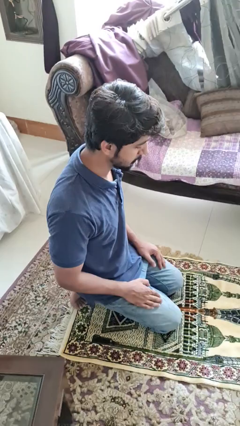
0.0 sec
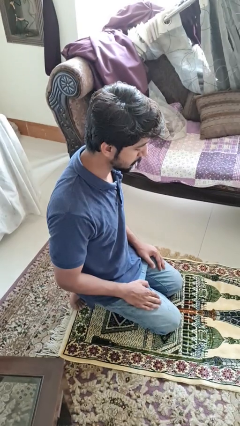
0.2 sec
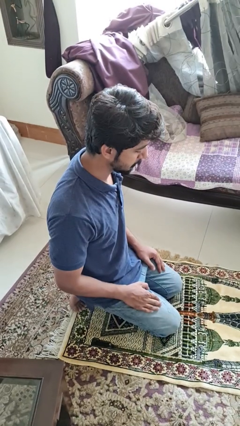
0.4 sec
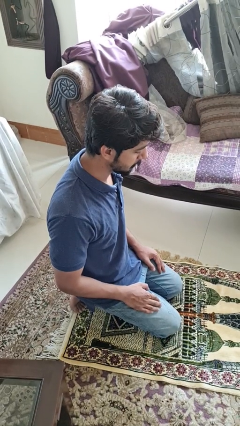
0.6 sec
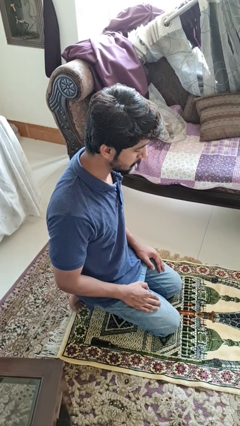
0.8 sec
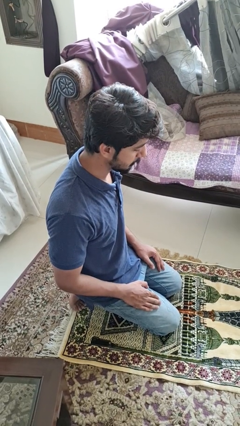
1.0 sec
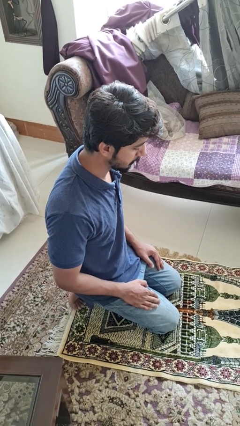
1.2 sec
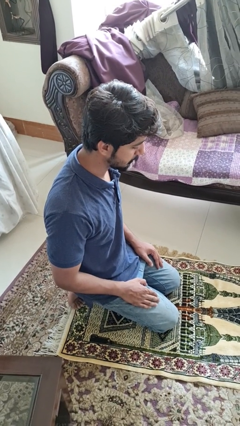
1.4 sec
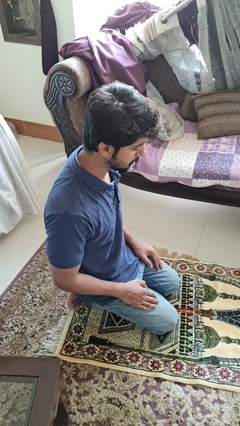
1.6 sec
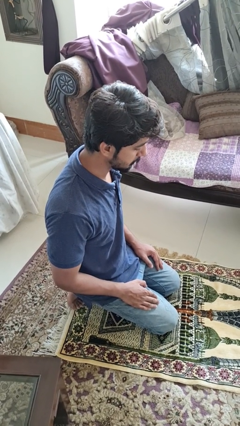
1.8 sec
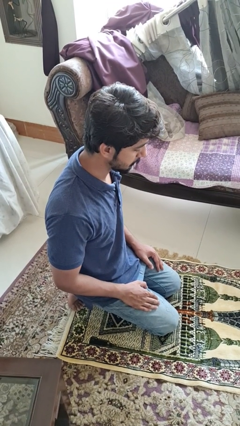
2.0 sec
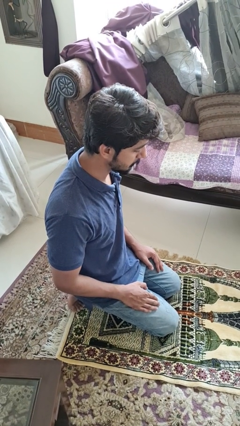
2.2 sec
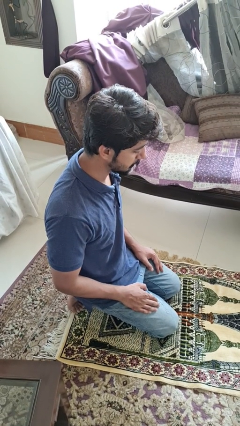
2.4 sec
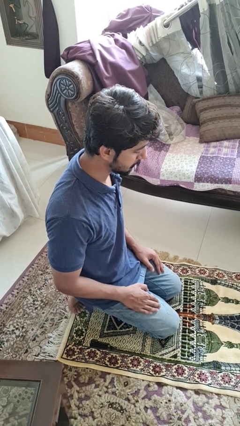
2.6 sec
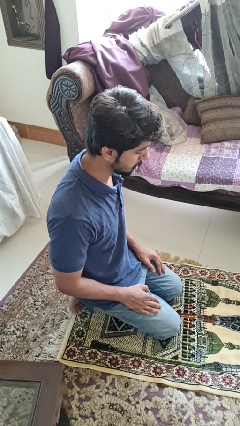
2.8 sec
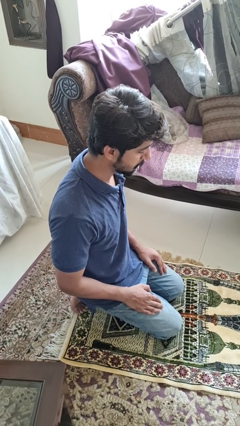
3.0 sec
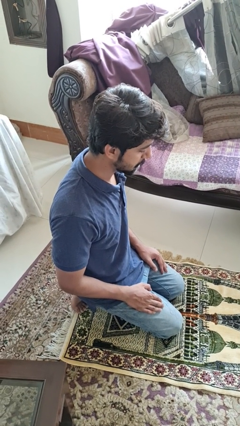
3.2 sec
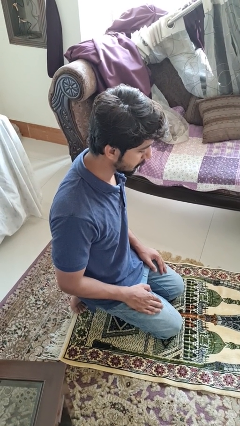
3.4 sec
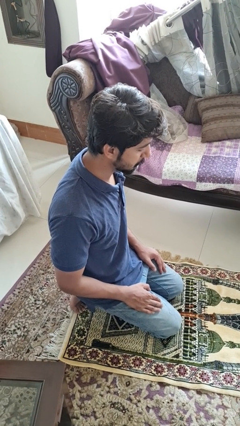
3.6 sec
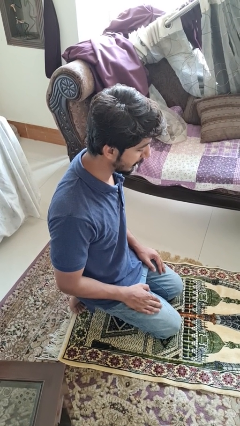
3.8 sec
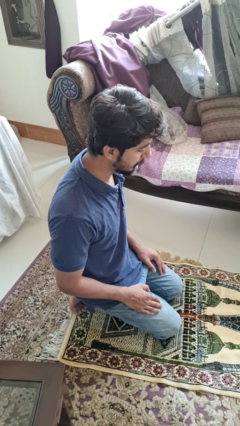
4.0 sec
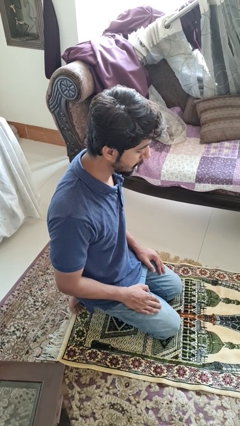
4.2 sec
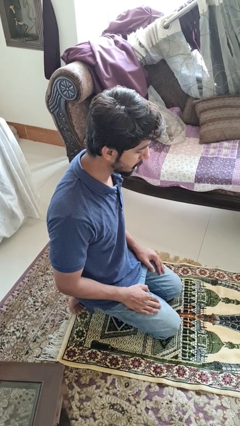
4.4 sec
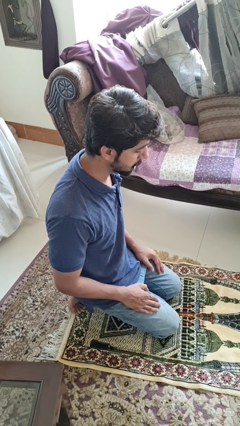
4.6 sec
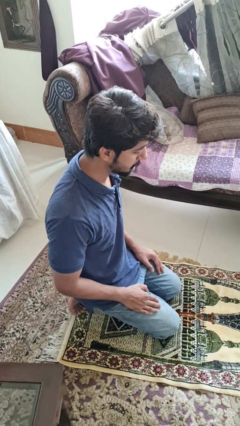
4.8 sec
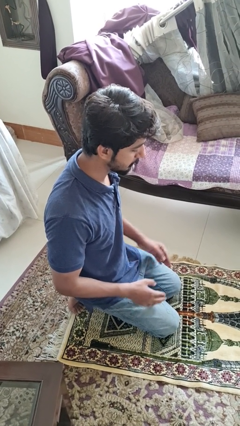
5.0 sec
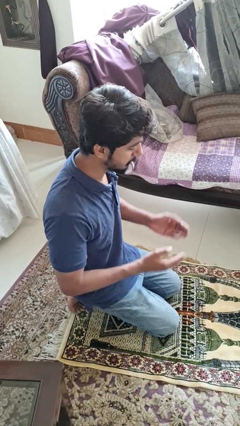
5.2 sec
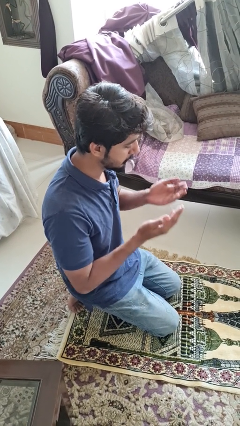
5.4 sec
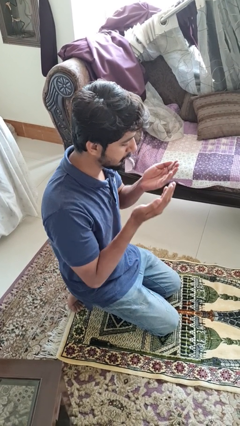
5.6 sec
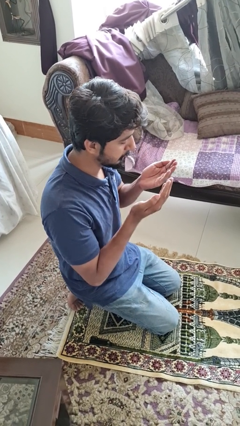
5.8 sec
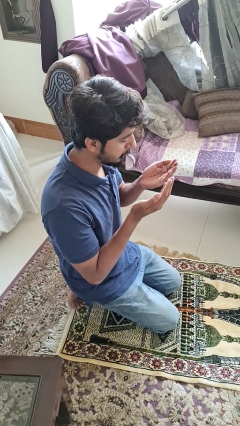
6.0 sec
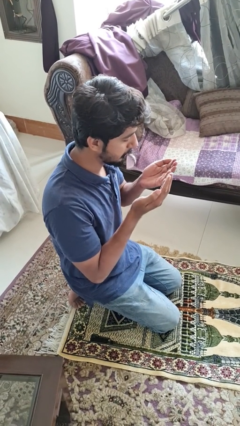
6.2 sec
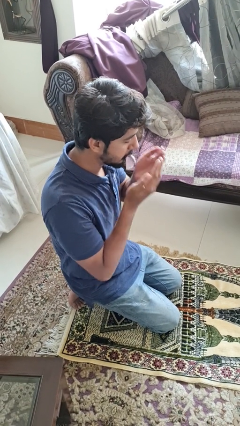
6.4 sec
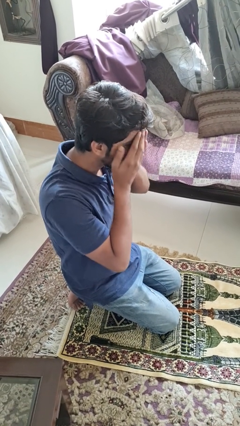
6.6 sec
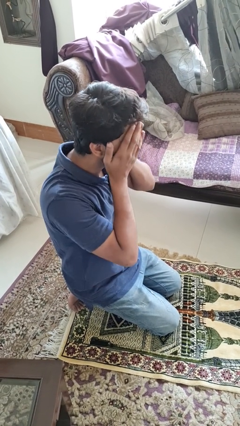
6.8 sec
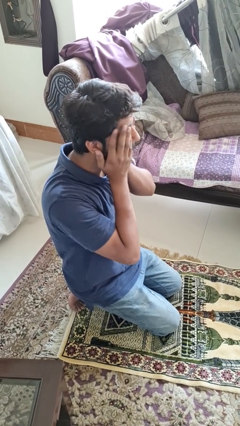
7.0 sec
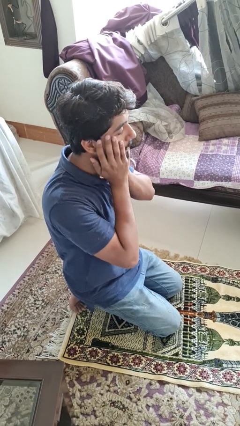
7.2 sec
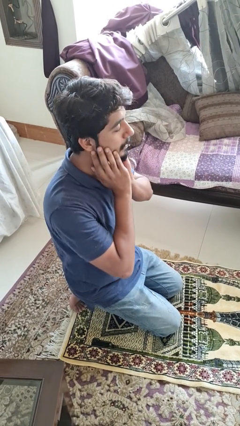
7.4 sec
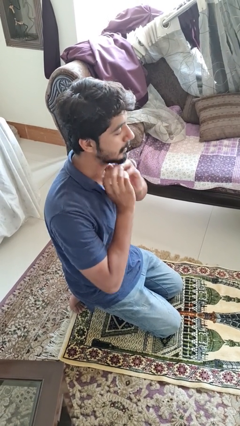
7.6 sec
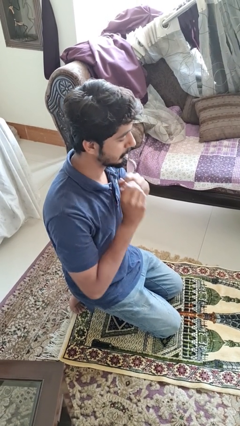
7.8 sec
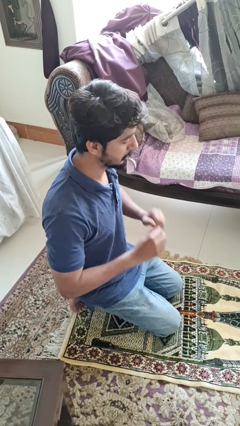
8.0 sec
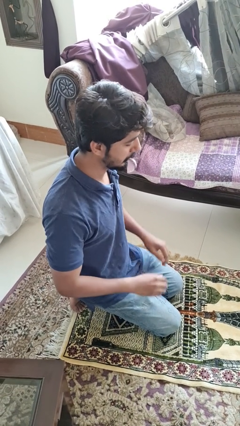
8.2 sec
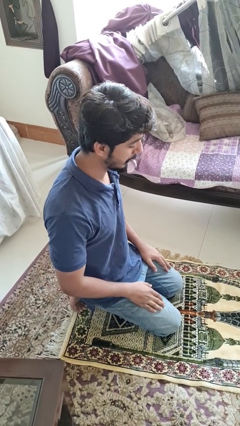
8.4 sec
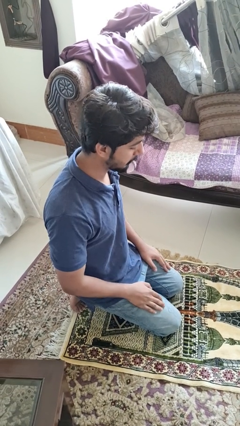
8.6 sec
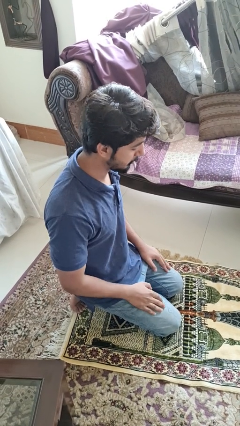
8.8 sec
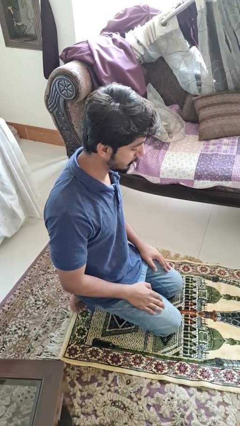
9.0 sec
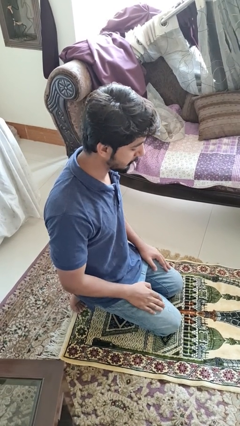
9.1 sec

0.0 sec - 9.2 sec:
person prays

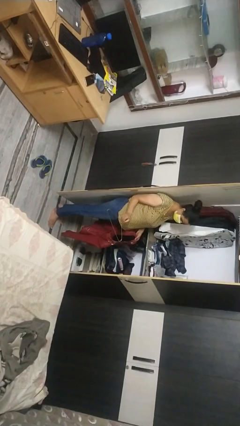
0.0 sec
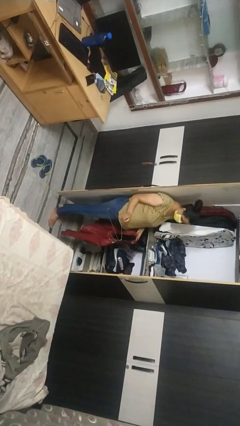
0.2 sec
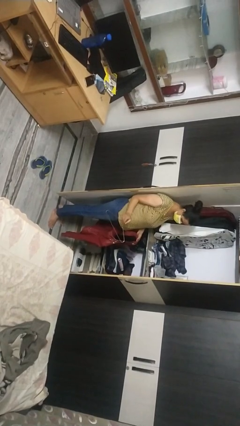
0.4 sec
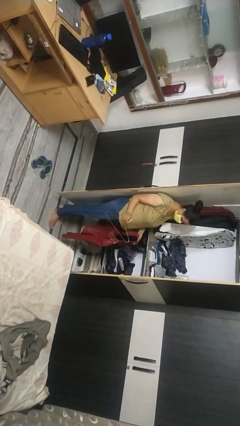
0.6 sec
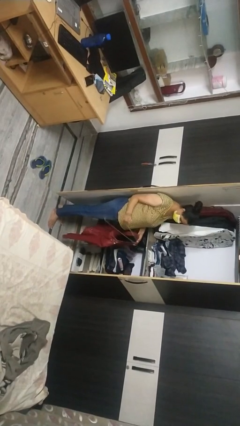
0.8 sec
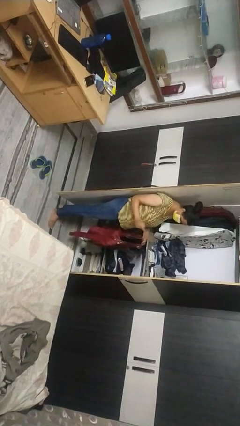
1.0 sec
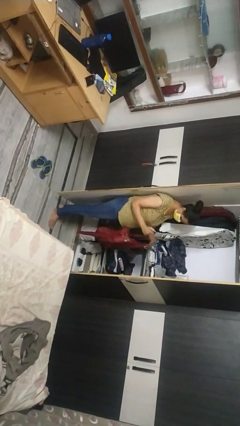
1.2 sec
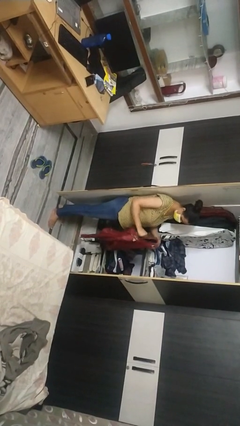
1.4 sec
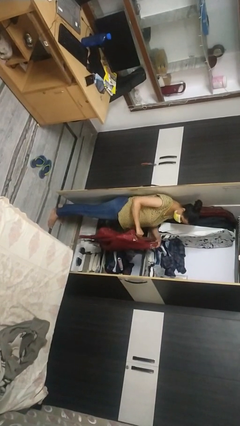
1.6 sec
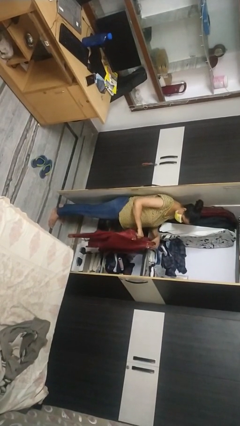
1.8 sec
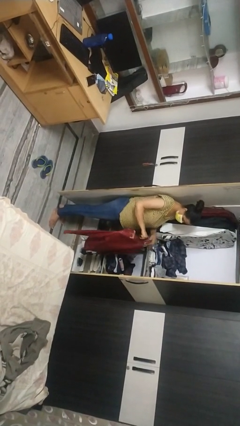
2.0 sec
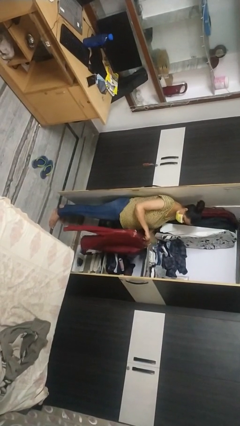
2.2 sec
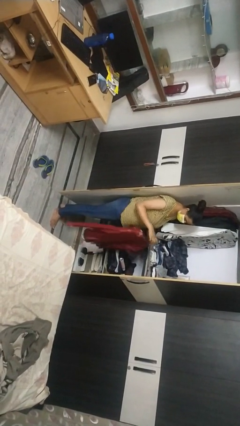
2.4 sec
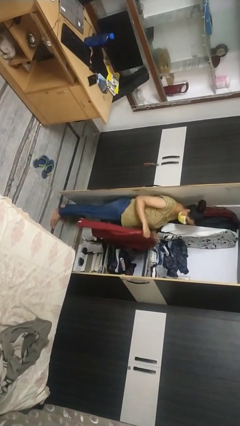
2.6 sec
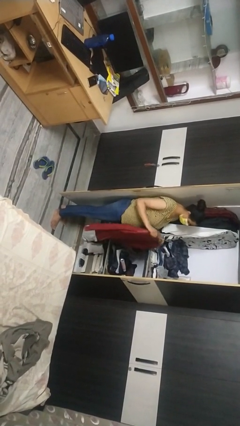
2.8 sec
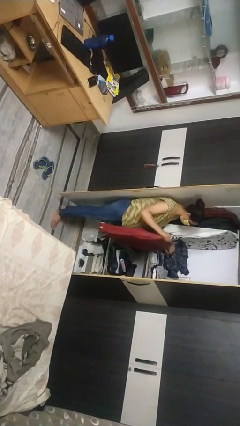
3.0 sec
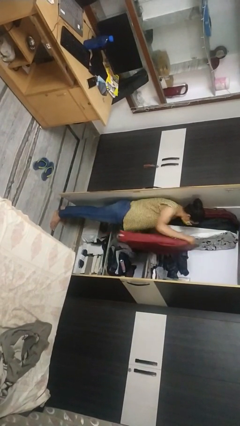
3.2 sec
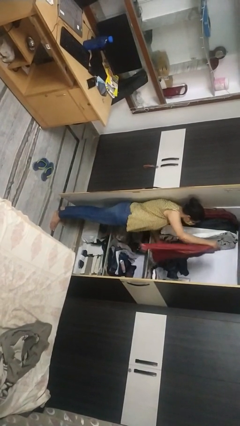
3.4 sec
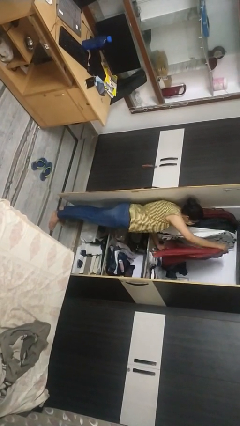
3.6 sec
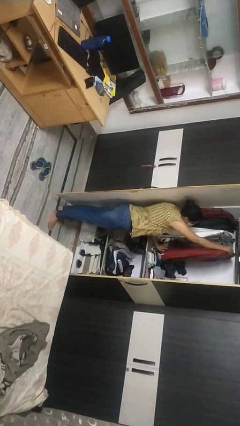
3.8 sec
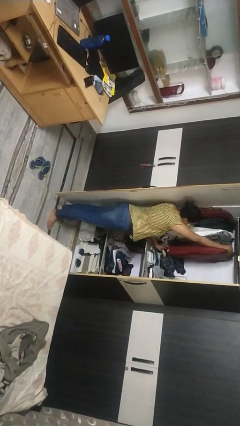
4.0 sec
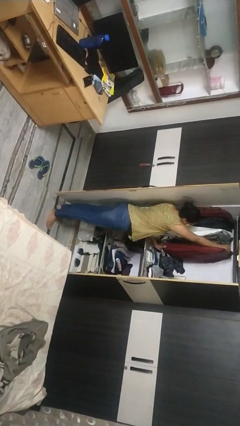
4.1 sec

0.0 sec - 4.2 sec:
person puts clothes into closet

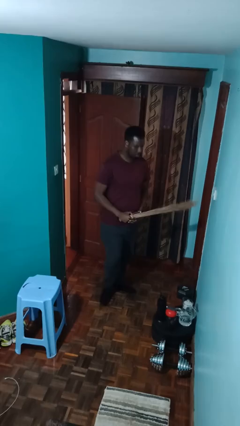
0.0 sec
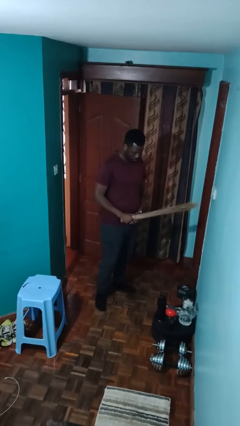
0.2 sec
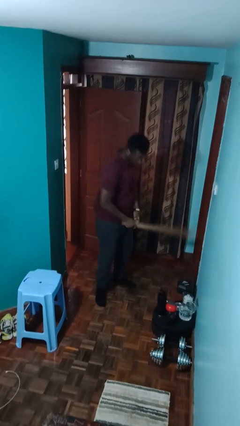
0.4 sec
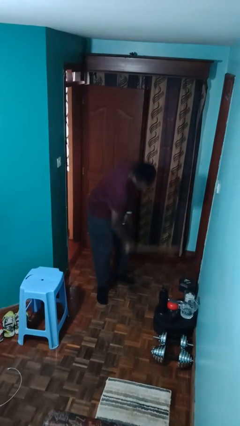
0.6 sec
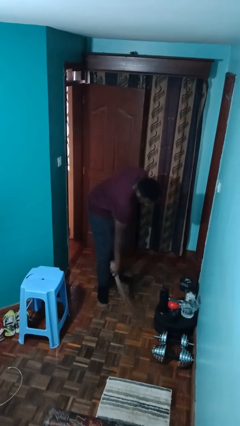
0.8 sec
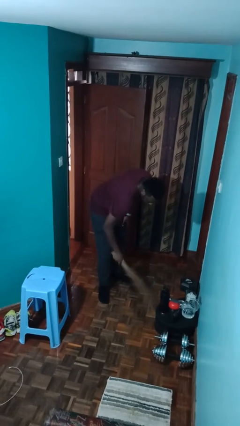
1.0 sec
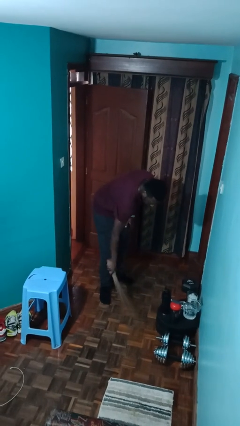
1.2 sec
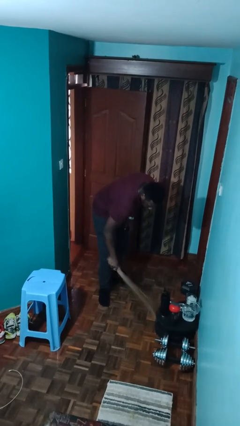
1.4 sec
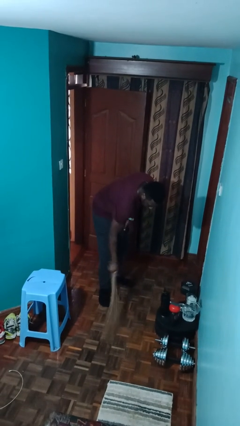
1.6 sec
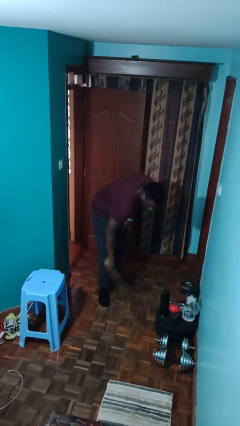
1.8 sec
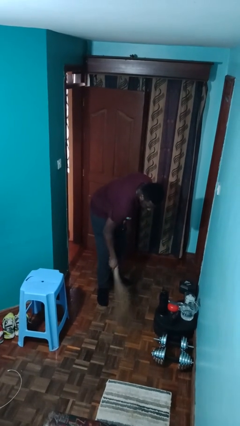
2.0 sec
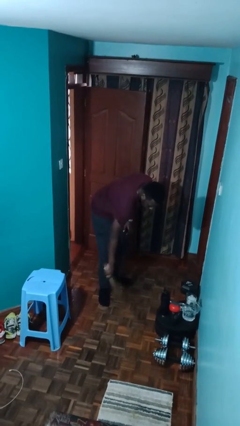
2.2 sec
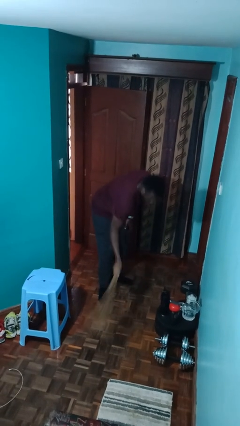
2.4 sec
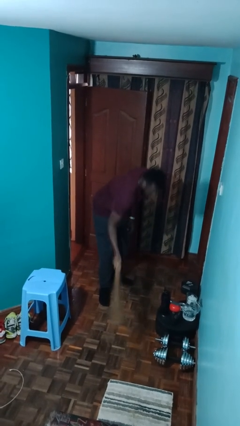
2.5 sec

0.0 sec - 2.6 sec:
person sweeps floor

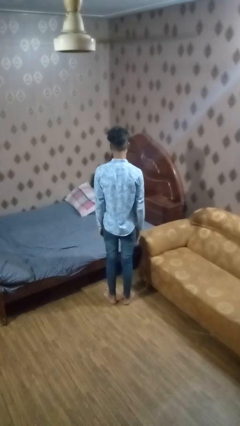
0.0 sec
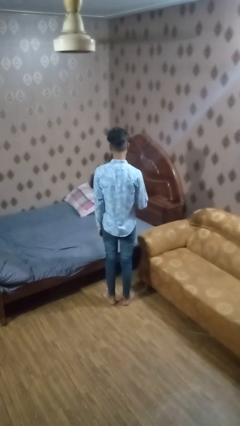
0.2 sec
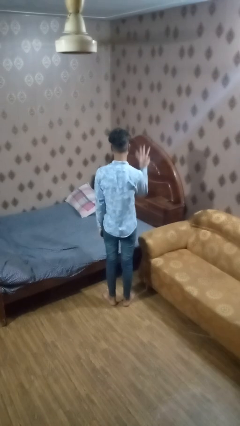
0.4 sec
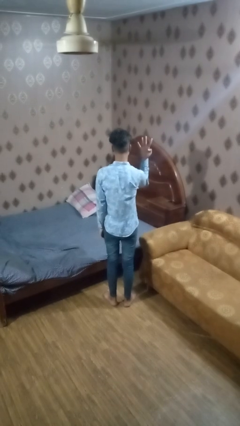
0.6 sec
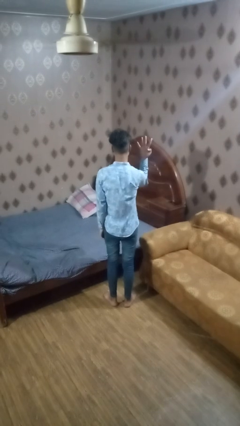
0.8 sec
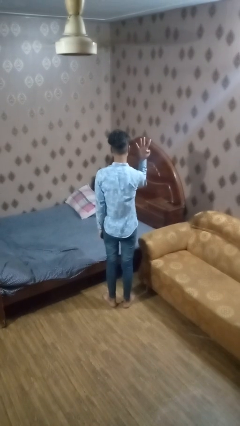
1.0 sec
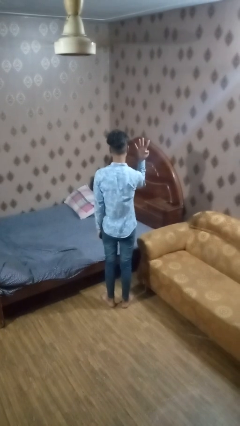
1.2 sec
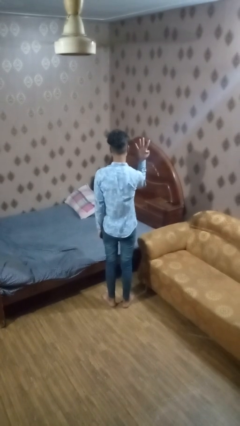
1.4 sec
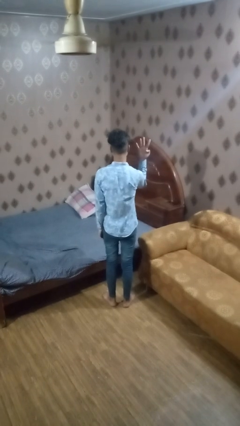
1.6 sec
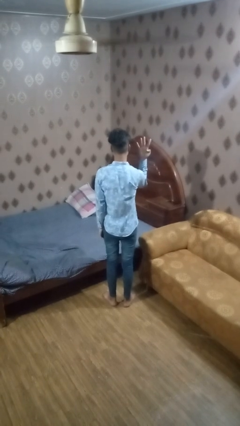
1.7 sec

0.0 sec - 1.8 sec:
person gestures number four

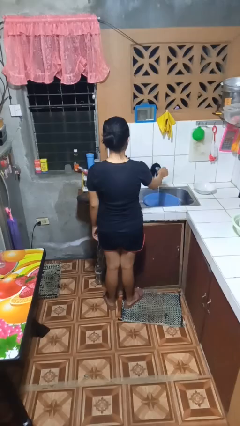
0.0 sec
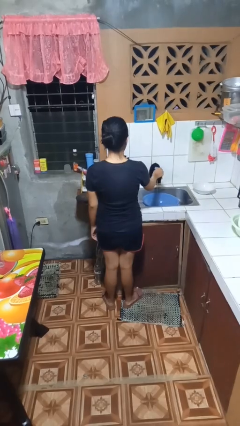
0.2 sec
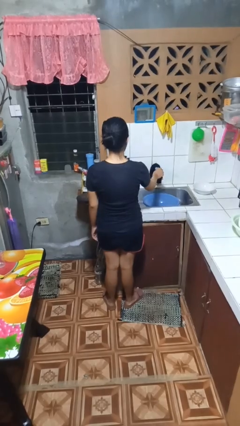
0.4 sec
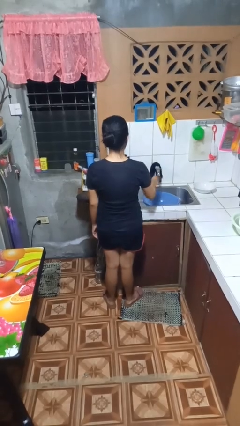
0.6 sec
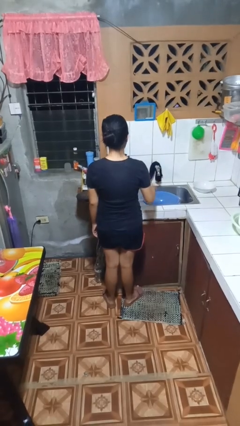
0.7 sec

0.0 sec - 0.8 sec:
person turns off faucet
